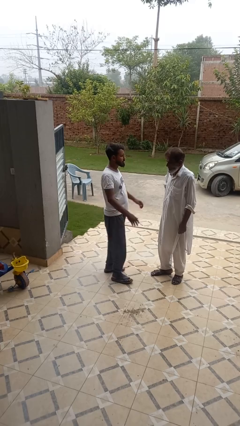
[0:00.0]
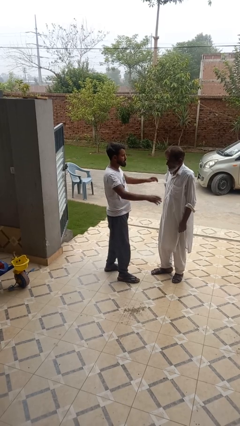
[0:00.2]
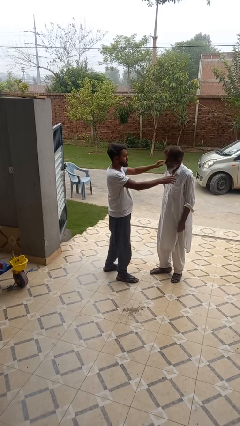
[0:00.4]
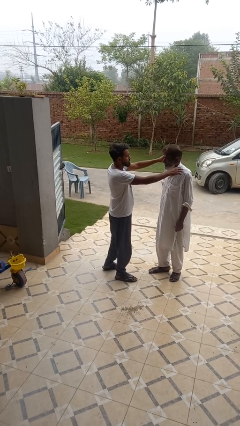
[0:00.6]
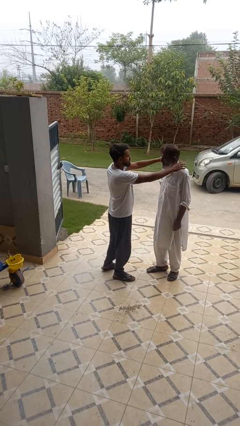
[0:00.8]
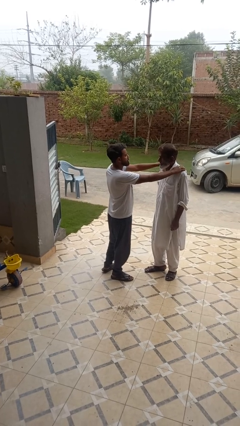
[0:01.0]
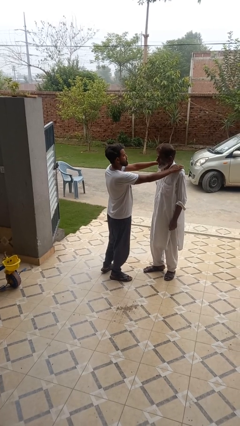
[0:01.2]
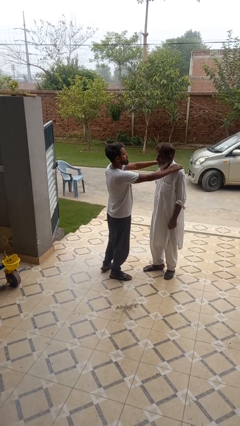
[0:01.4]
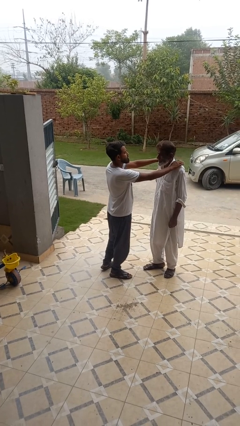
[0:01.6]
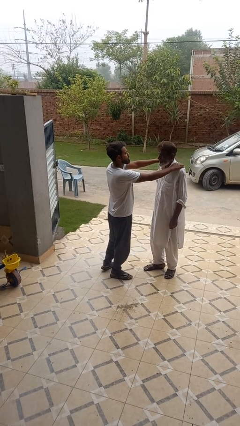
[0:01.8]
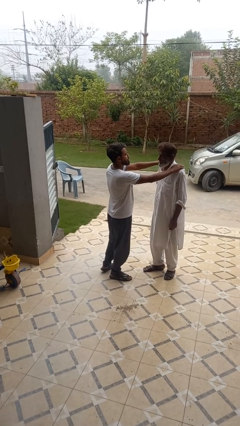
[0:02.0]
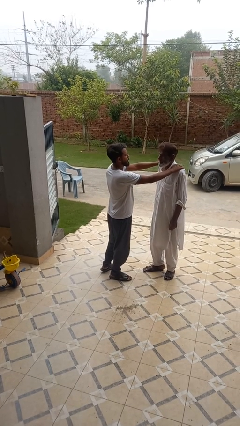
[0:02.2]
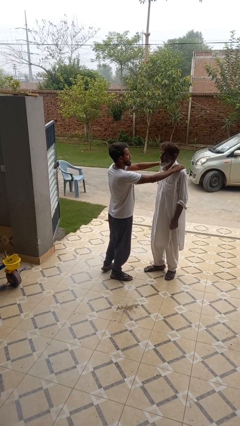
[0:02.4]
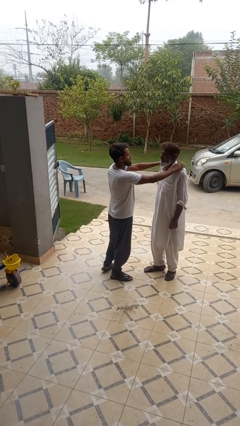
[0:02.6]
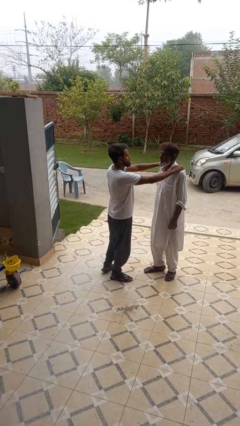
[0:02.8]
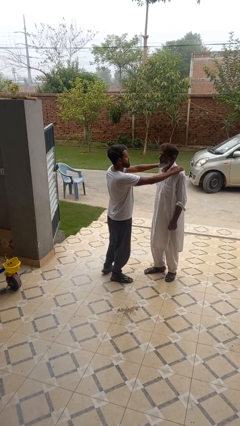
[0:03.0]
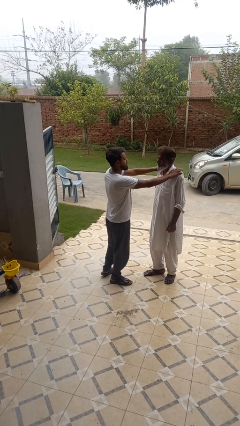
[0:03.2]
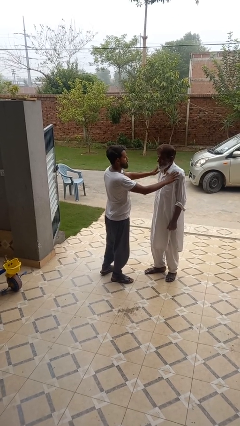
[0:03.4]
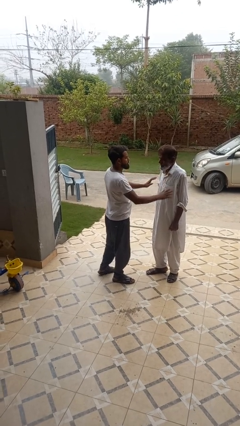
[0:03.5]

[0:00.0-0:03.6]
person pounds shoulders of person

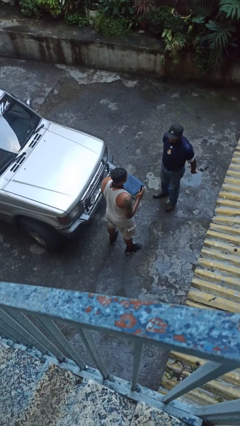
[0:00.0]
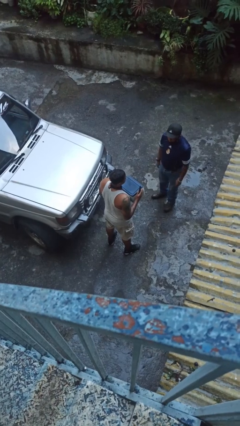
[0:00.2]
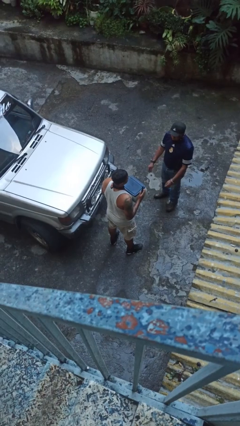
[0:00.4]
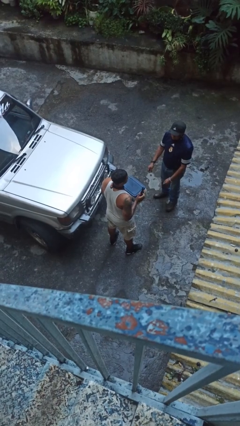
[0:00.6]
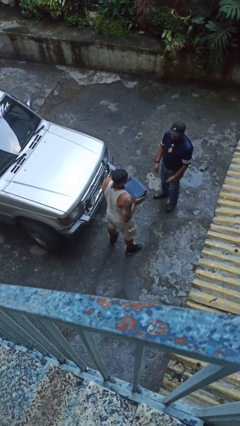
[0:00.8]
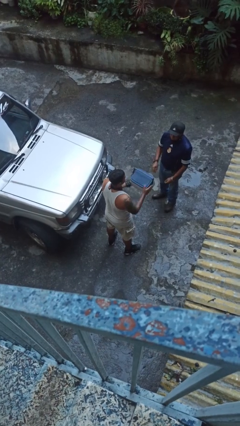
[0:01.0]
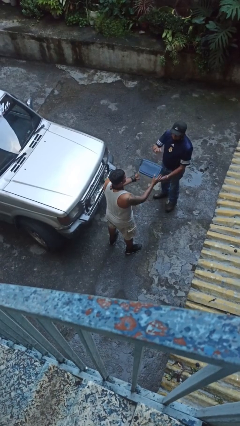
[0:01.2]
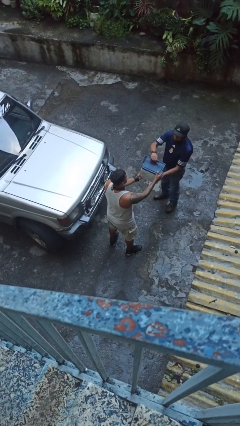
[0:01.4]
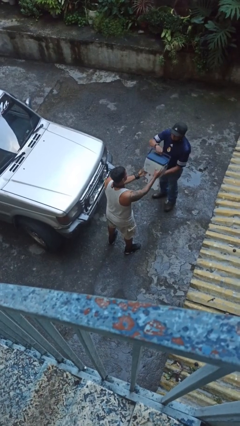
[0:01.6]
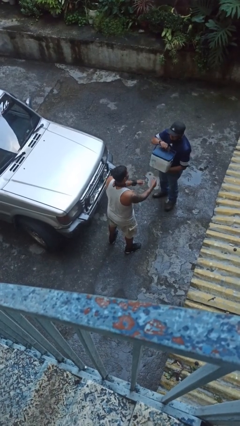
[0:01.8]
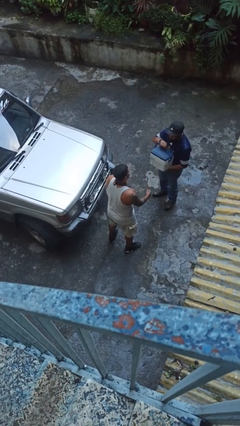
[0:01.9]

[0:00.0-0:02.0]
person transfers object to person

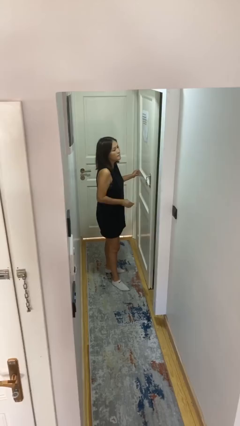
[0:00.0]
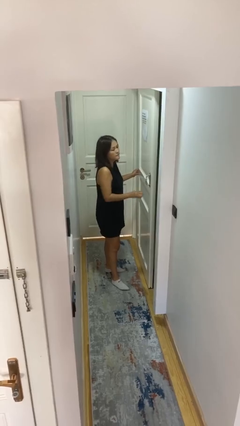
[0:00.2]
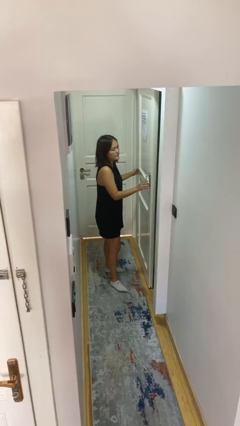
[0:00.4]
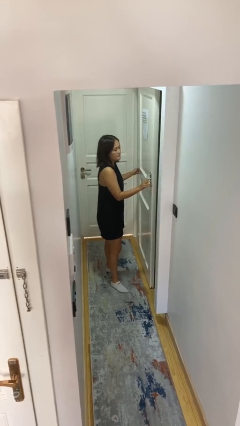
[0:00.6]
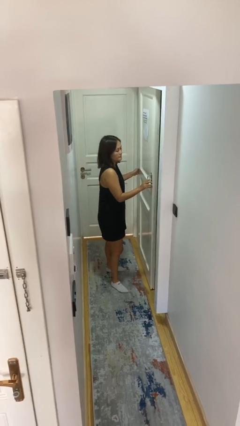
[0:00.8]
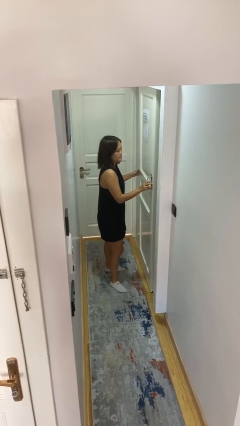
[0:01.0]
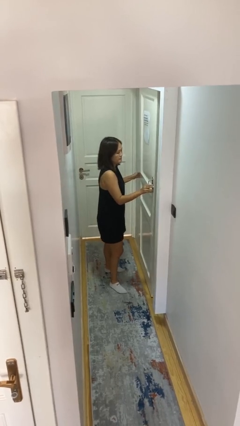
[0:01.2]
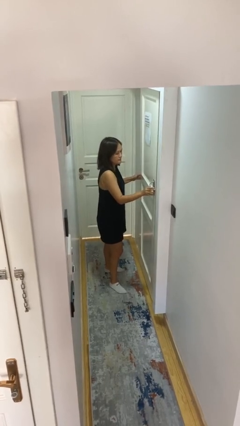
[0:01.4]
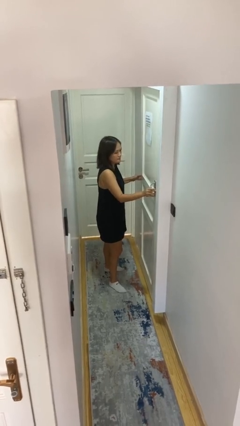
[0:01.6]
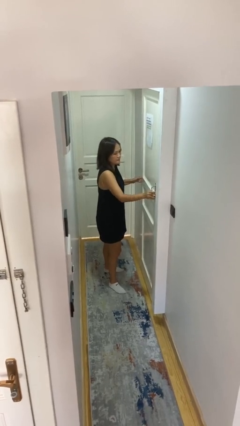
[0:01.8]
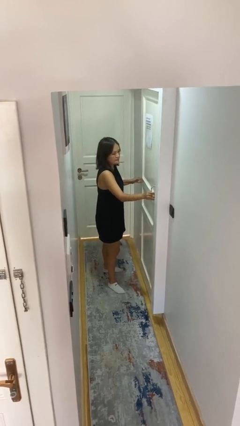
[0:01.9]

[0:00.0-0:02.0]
person closes sliding door

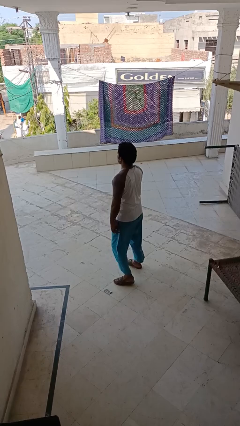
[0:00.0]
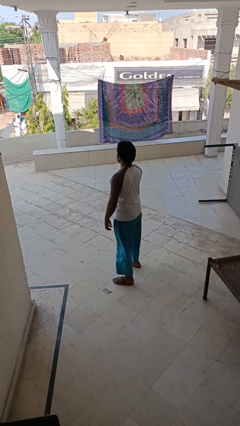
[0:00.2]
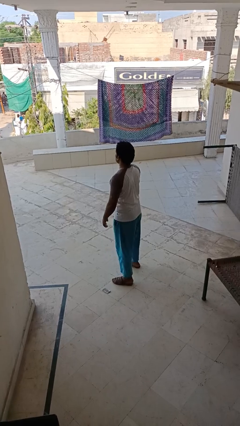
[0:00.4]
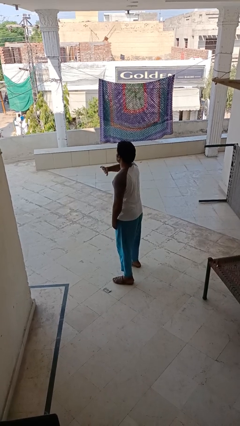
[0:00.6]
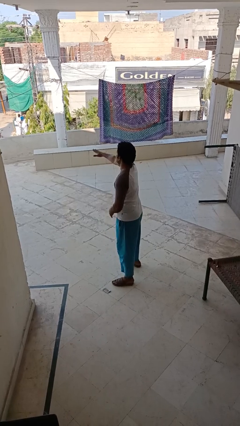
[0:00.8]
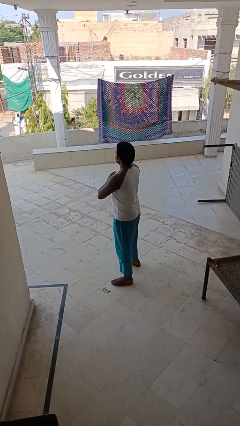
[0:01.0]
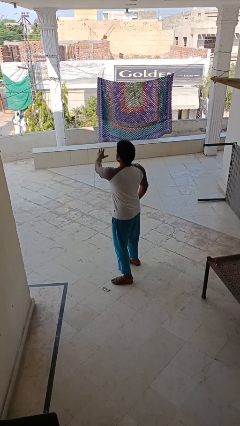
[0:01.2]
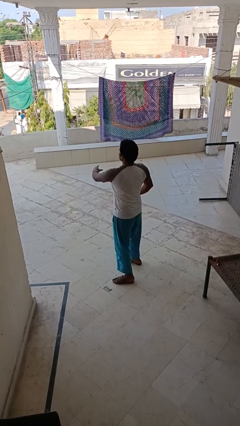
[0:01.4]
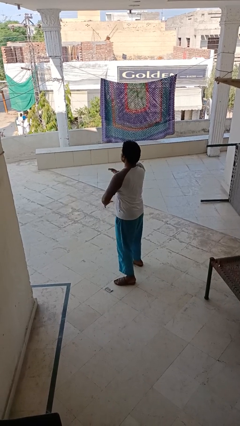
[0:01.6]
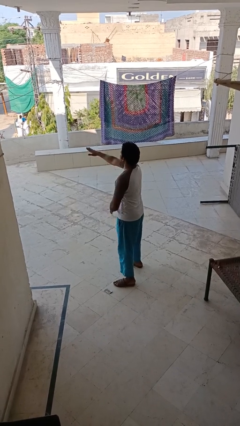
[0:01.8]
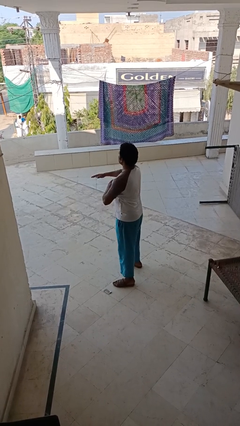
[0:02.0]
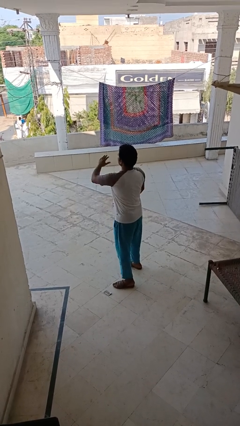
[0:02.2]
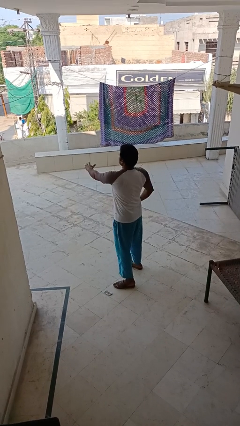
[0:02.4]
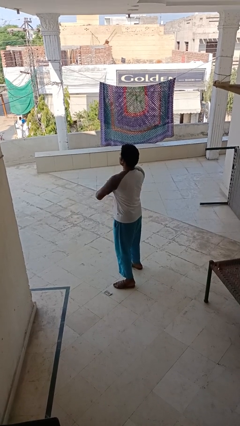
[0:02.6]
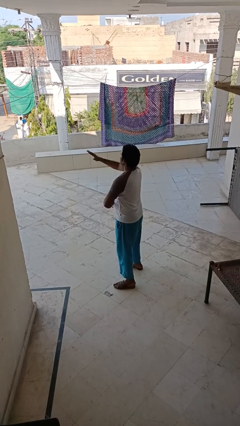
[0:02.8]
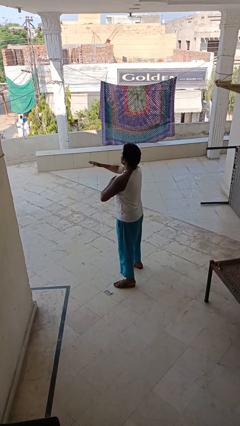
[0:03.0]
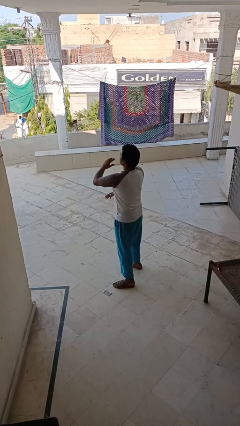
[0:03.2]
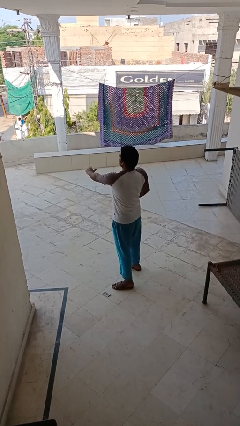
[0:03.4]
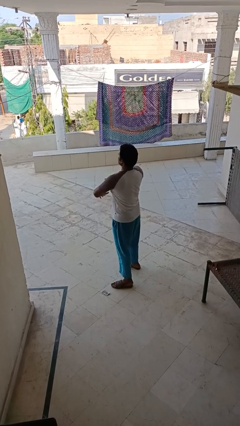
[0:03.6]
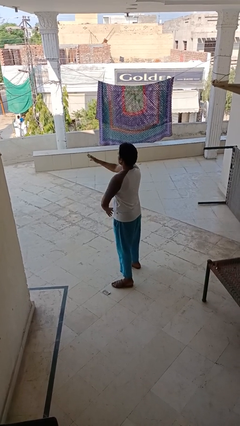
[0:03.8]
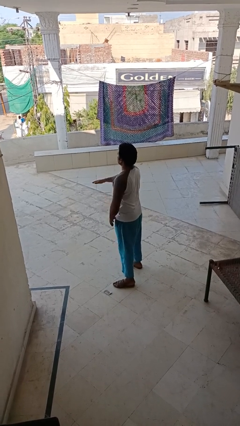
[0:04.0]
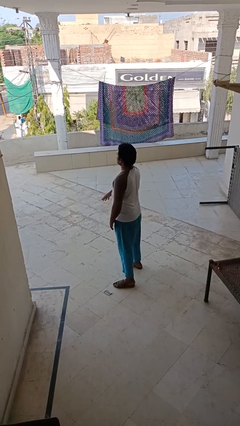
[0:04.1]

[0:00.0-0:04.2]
person karate chop

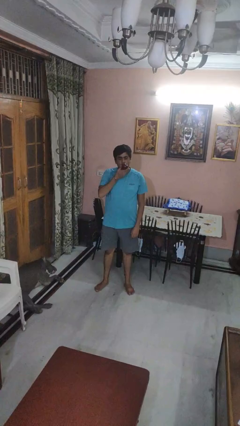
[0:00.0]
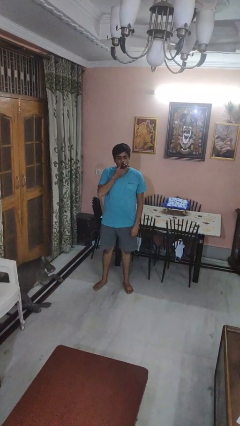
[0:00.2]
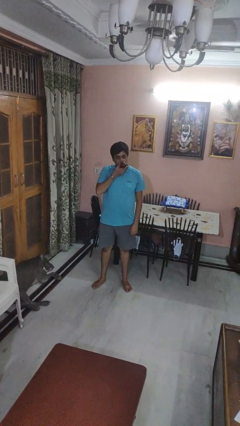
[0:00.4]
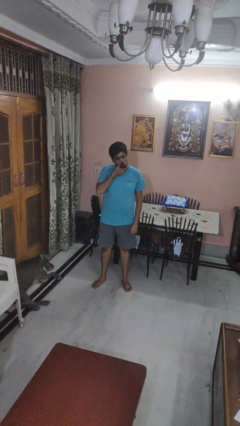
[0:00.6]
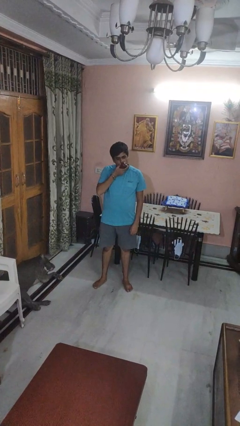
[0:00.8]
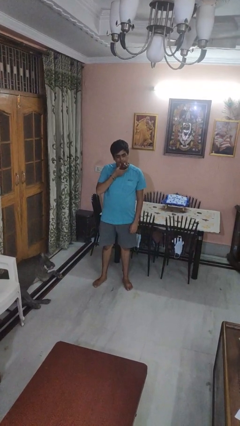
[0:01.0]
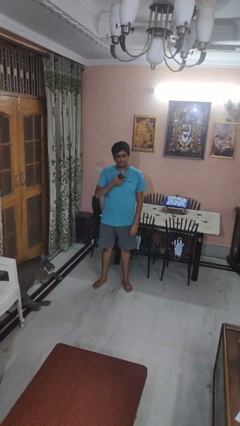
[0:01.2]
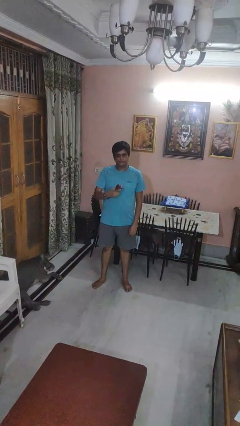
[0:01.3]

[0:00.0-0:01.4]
person eats apple

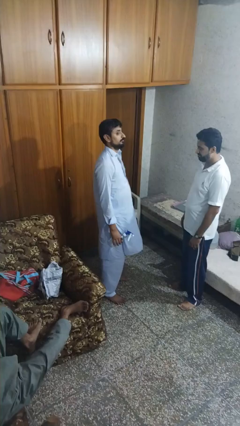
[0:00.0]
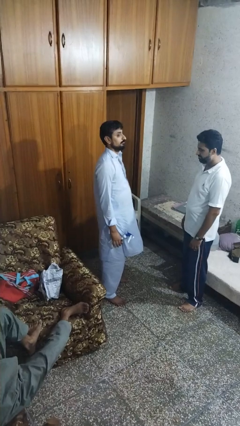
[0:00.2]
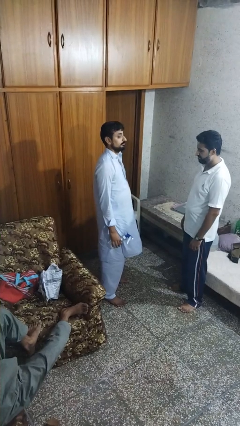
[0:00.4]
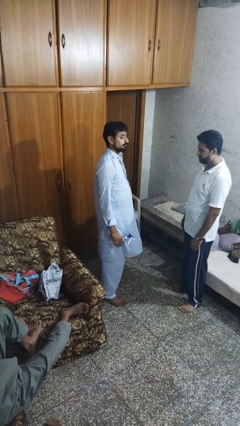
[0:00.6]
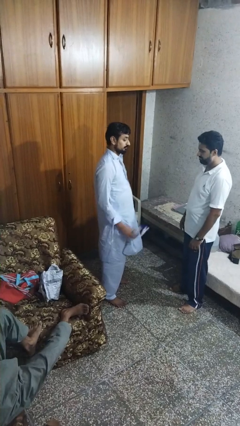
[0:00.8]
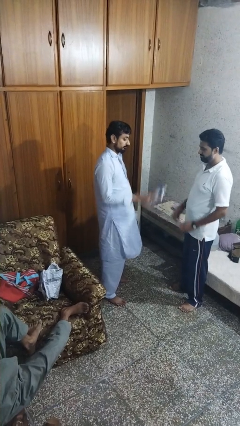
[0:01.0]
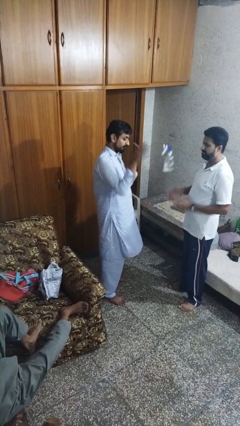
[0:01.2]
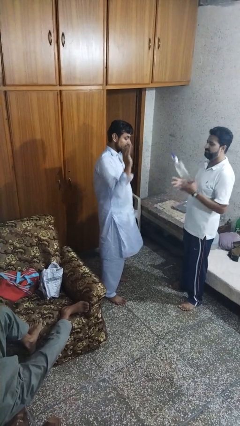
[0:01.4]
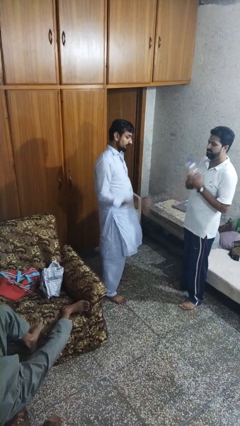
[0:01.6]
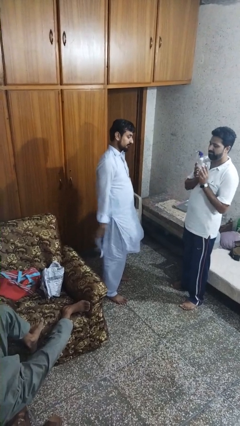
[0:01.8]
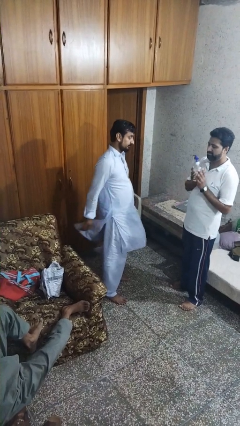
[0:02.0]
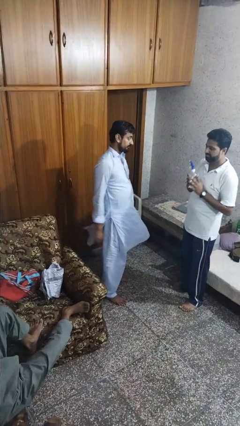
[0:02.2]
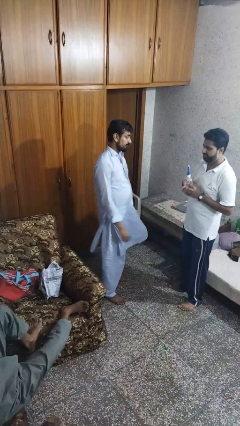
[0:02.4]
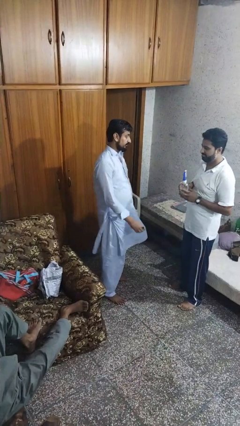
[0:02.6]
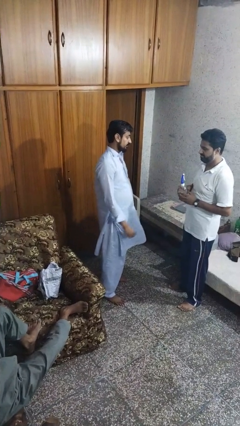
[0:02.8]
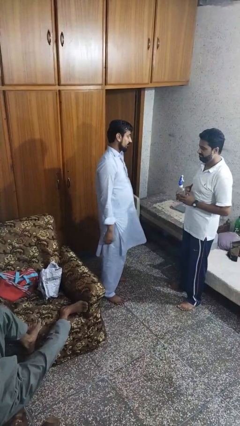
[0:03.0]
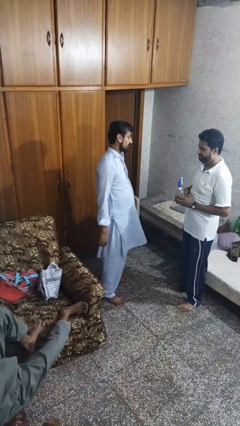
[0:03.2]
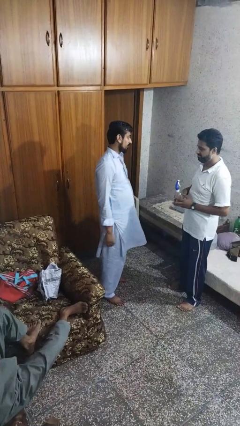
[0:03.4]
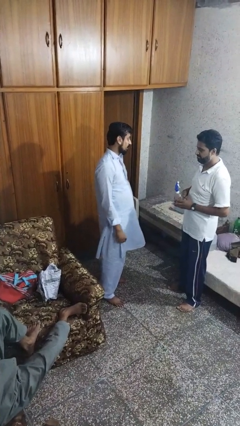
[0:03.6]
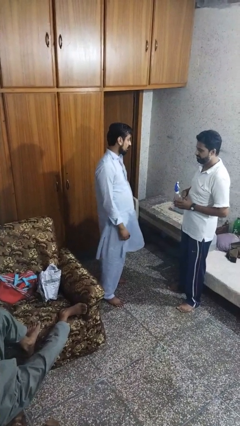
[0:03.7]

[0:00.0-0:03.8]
person throws object to person

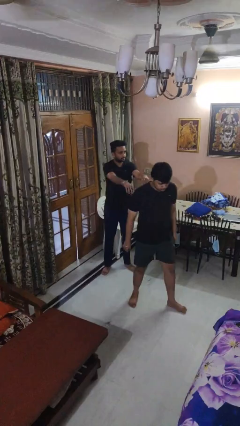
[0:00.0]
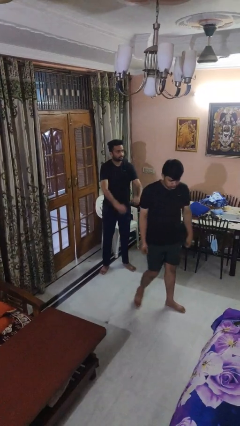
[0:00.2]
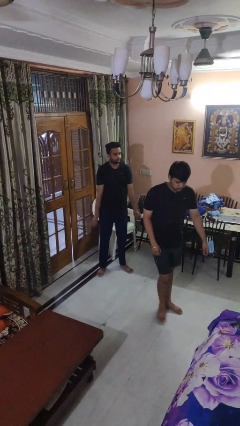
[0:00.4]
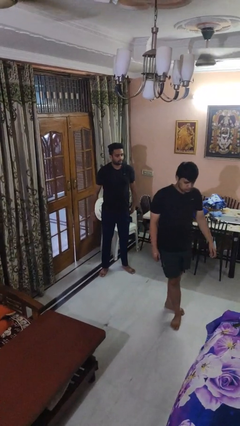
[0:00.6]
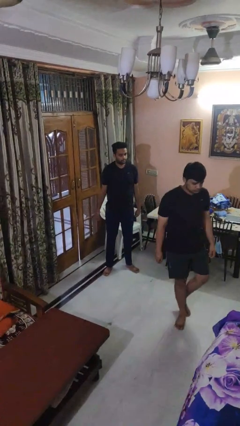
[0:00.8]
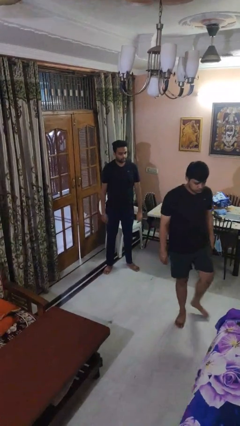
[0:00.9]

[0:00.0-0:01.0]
person shoves person
